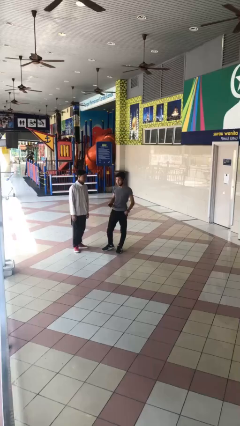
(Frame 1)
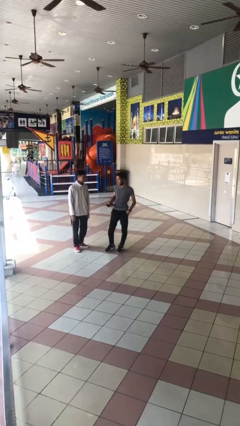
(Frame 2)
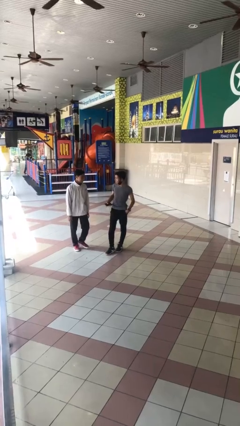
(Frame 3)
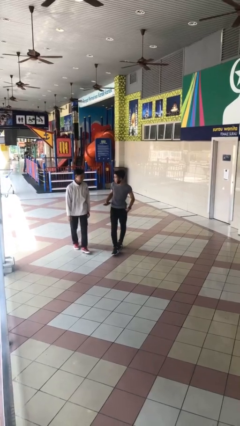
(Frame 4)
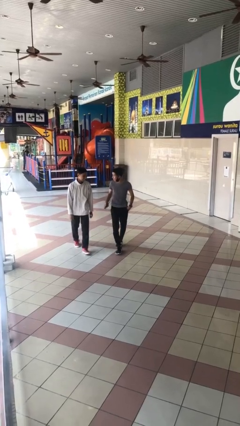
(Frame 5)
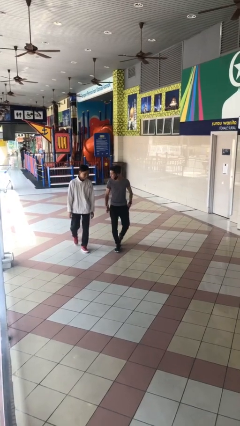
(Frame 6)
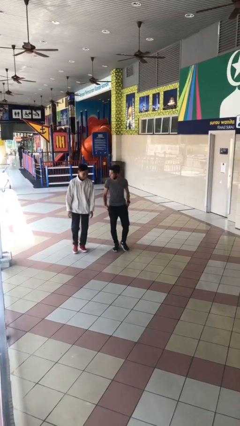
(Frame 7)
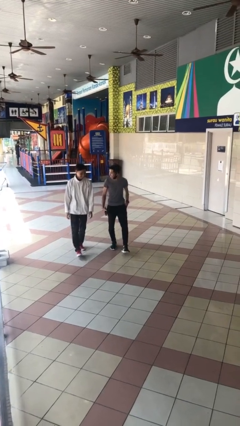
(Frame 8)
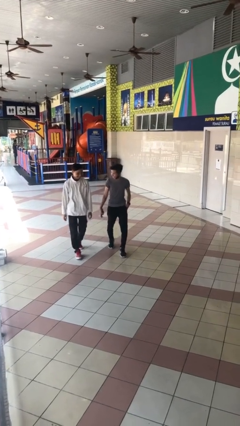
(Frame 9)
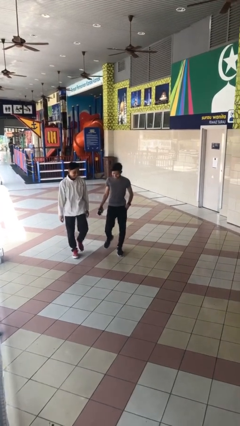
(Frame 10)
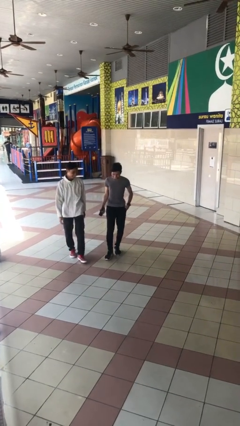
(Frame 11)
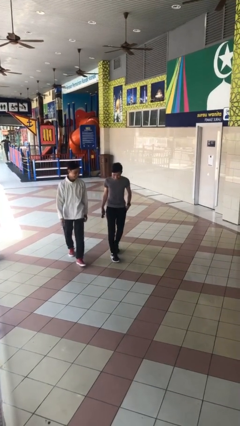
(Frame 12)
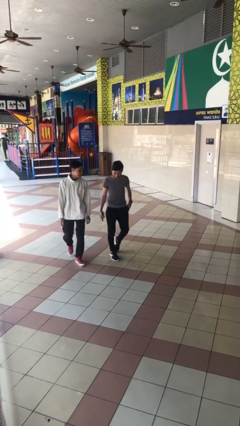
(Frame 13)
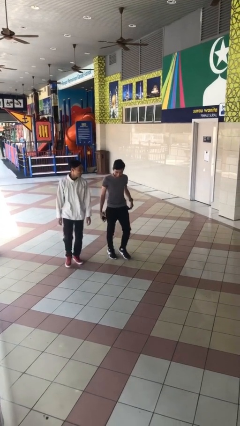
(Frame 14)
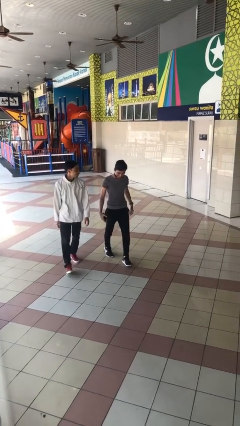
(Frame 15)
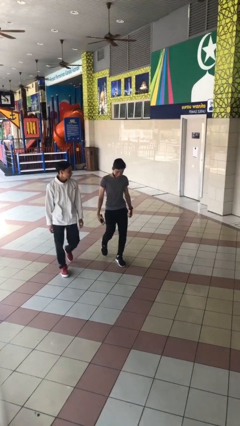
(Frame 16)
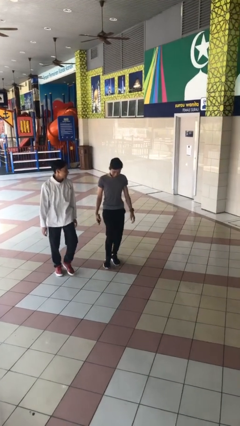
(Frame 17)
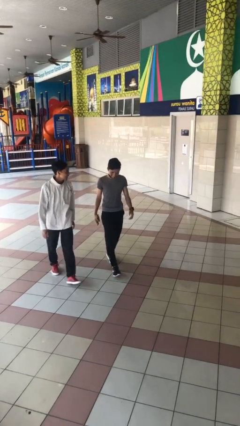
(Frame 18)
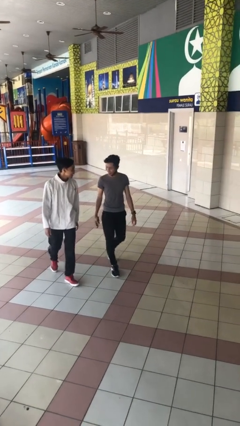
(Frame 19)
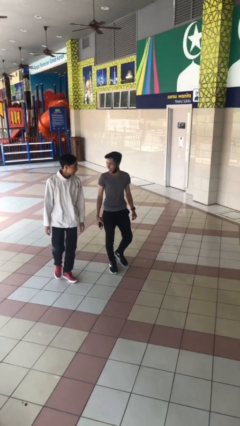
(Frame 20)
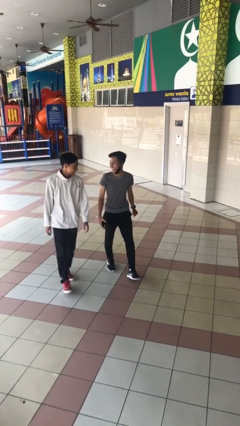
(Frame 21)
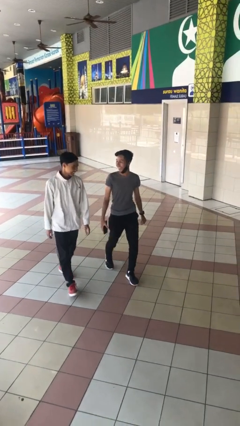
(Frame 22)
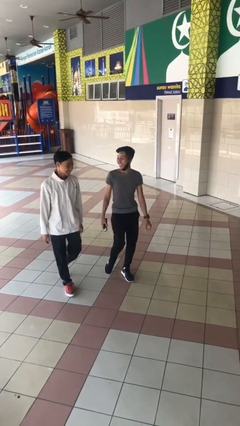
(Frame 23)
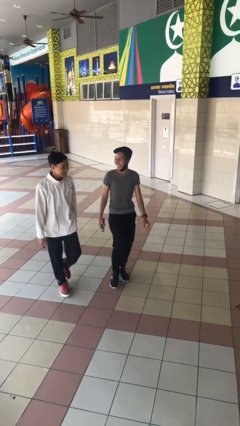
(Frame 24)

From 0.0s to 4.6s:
person talks to person

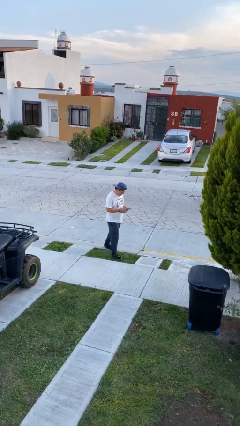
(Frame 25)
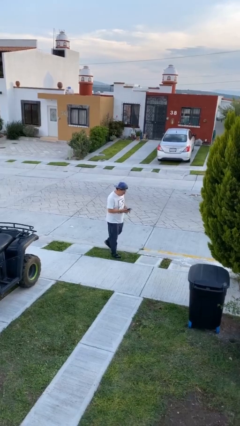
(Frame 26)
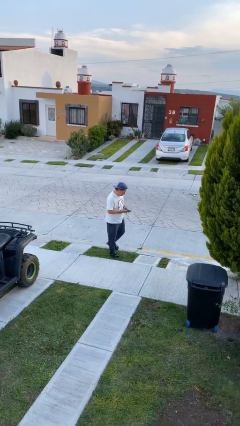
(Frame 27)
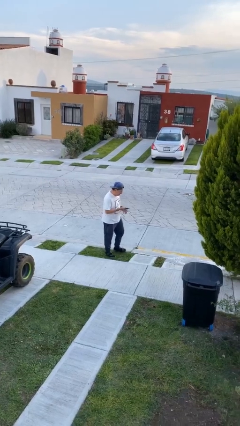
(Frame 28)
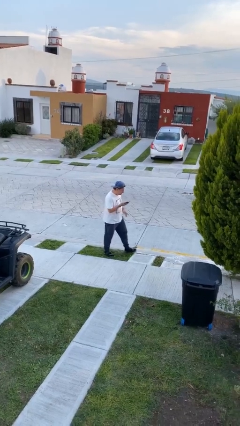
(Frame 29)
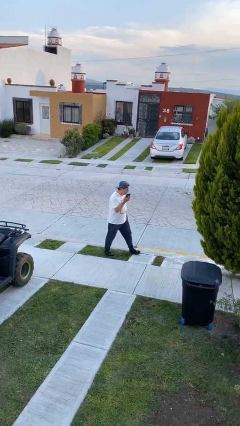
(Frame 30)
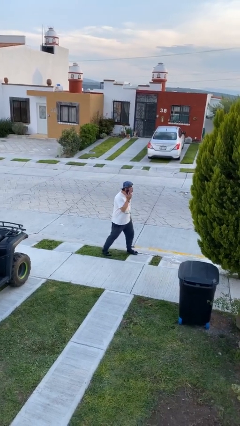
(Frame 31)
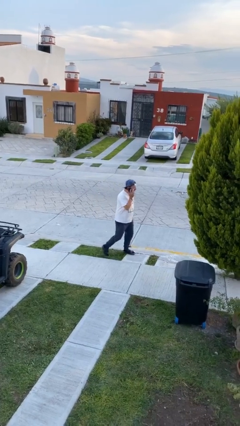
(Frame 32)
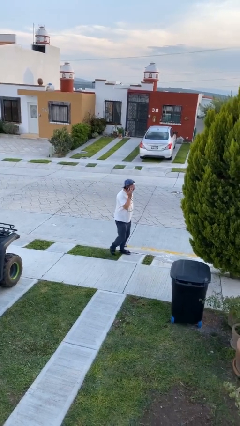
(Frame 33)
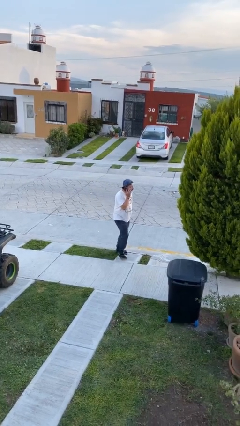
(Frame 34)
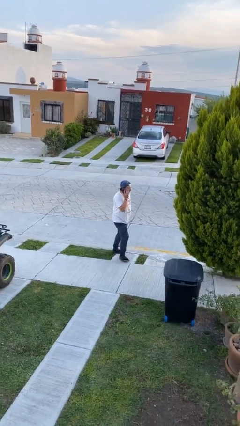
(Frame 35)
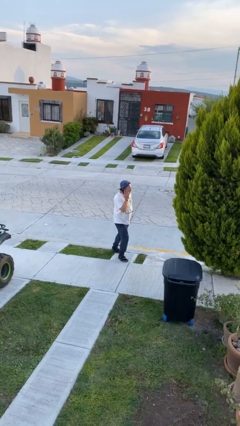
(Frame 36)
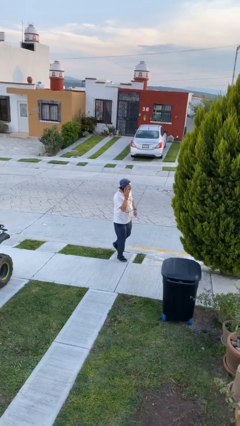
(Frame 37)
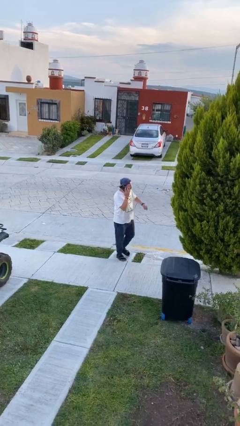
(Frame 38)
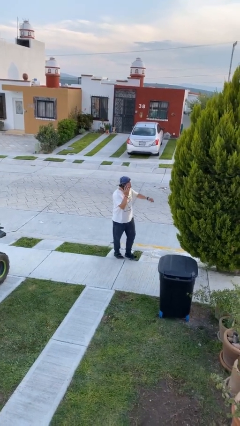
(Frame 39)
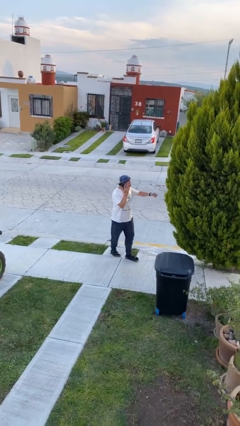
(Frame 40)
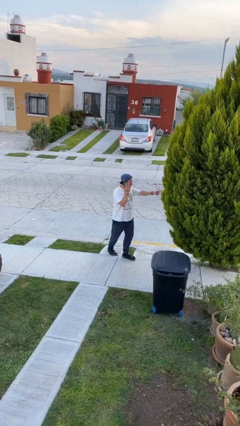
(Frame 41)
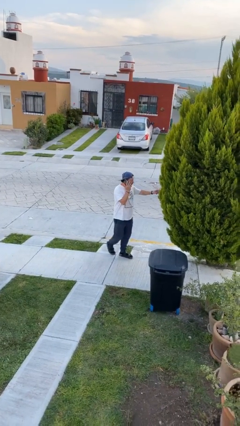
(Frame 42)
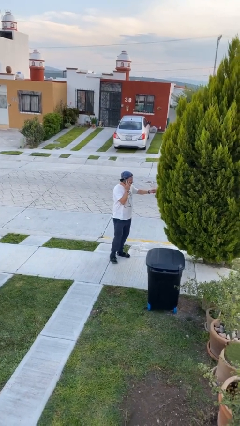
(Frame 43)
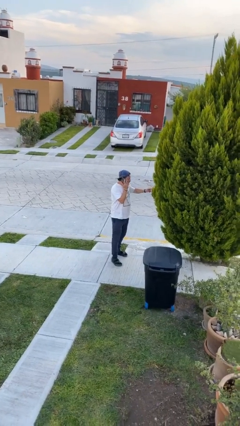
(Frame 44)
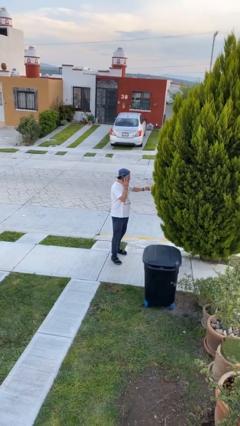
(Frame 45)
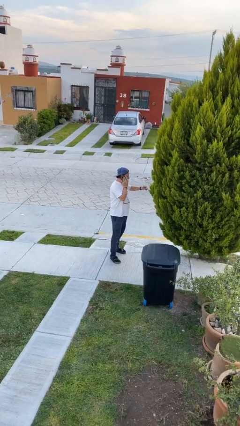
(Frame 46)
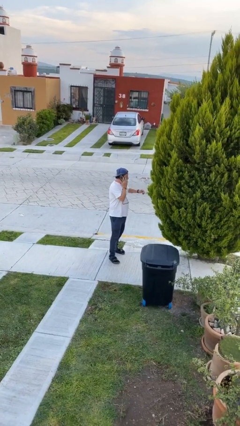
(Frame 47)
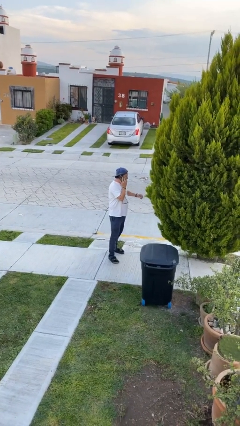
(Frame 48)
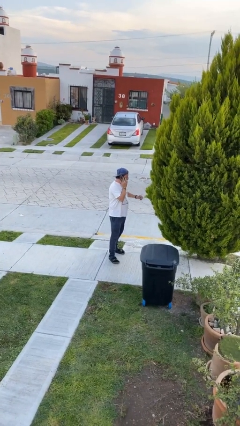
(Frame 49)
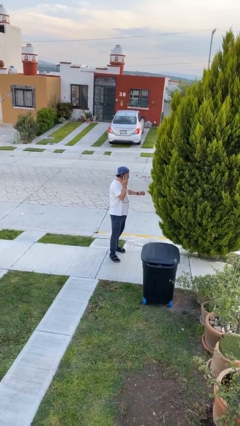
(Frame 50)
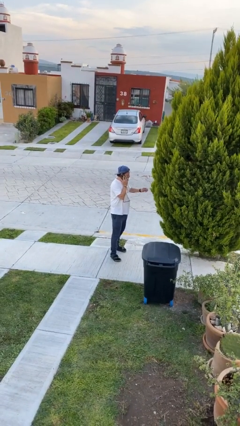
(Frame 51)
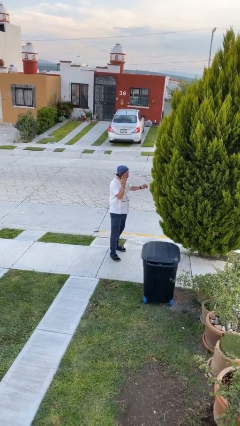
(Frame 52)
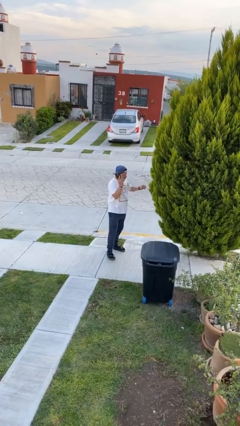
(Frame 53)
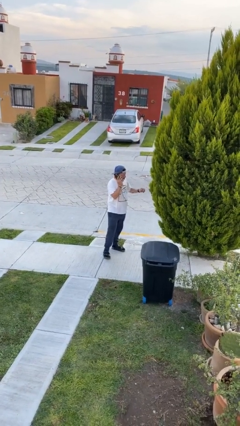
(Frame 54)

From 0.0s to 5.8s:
person talks on phone

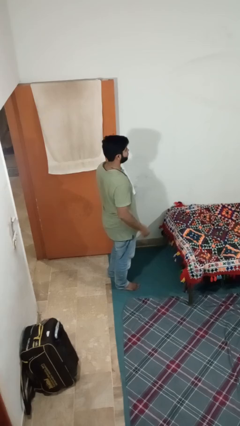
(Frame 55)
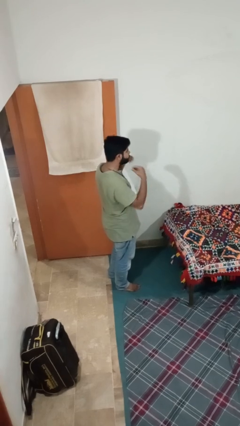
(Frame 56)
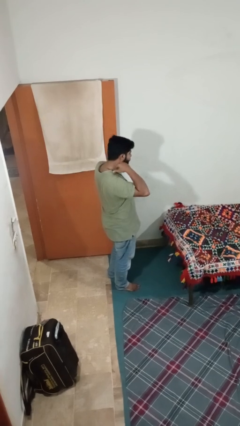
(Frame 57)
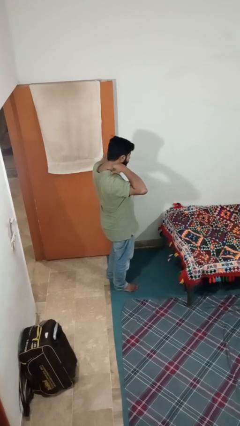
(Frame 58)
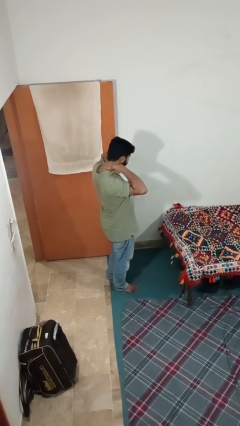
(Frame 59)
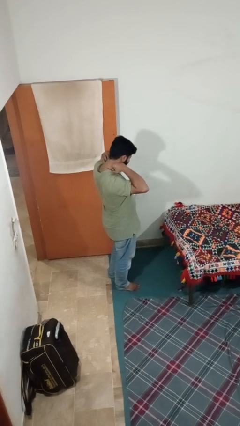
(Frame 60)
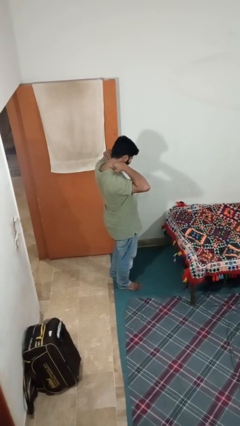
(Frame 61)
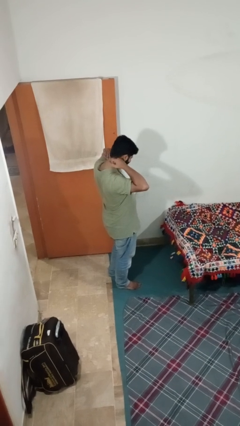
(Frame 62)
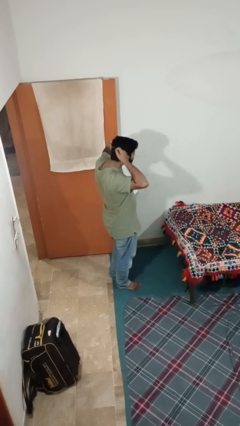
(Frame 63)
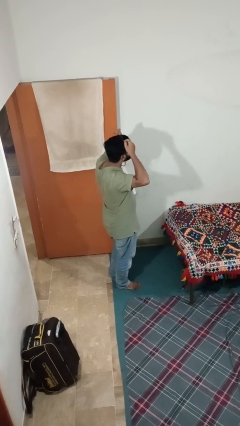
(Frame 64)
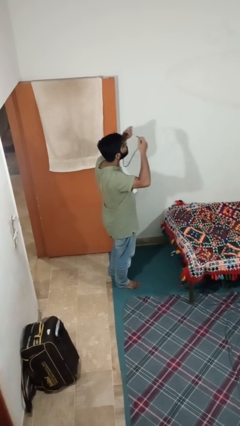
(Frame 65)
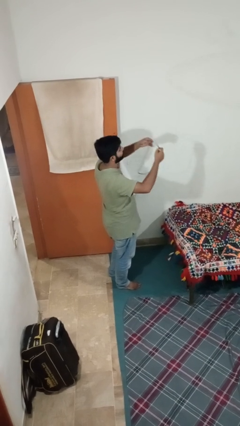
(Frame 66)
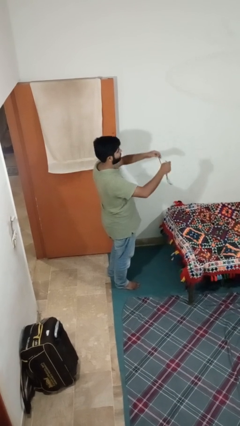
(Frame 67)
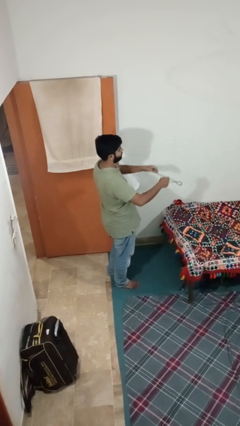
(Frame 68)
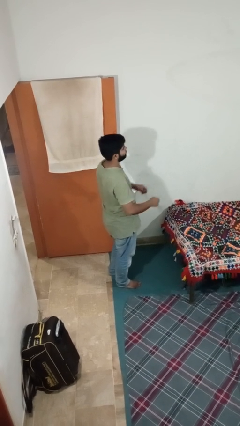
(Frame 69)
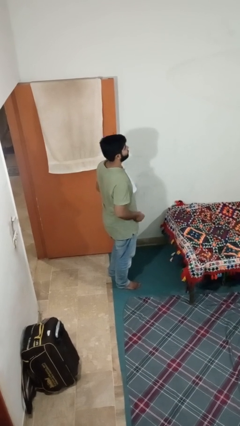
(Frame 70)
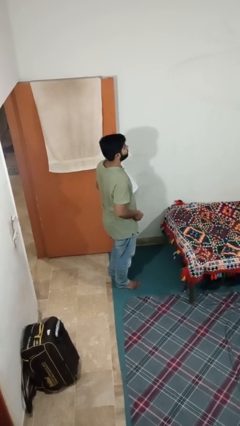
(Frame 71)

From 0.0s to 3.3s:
person takes off necklace

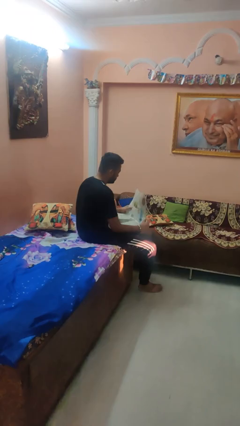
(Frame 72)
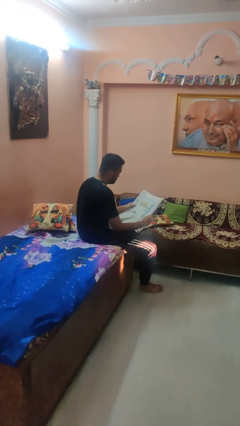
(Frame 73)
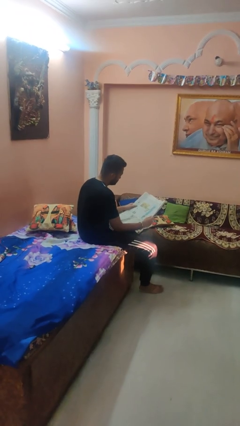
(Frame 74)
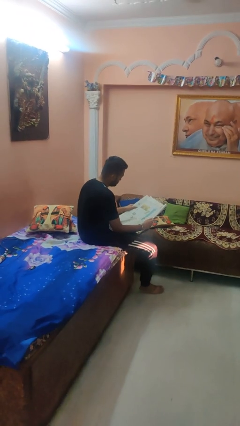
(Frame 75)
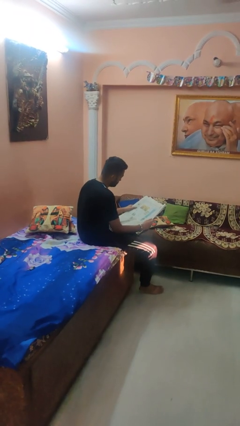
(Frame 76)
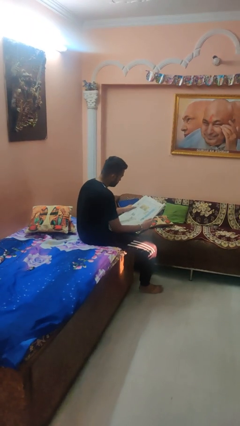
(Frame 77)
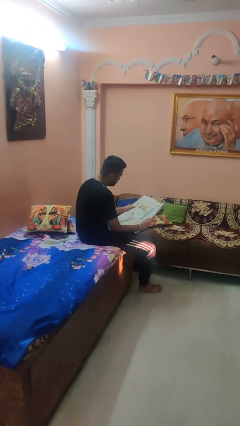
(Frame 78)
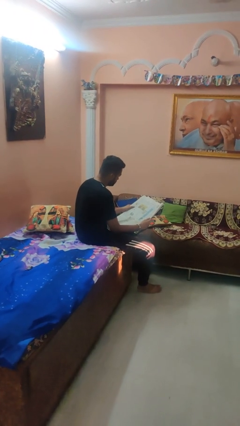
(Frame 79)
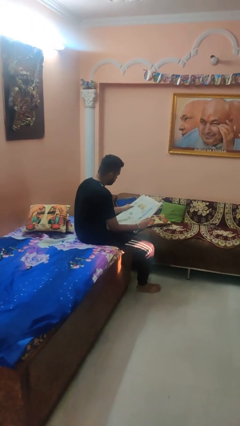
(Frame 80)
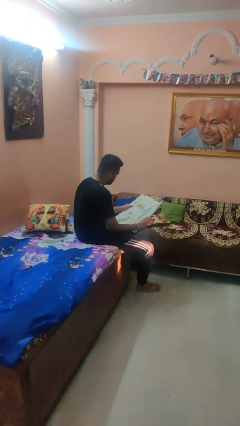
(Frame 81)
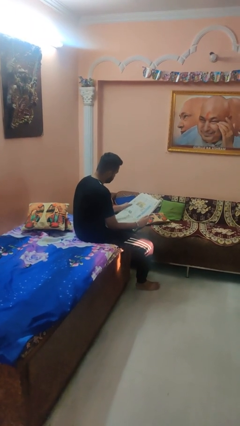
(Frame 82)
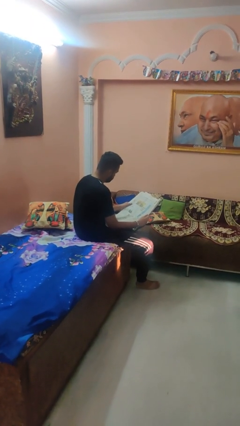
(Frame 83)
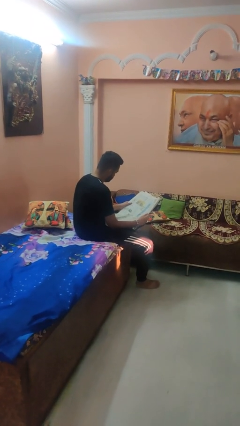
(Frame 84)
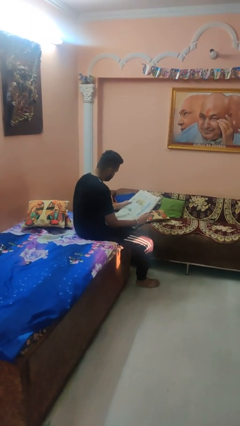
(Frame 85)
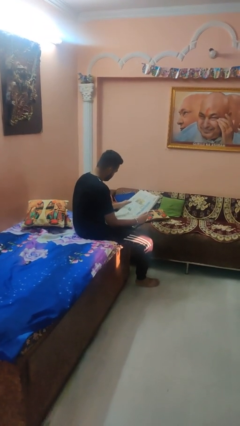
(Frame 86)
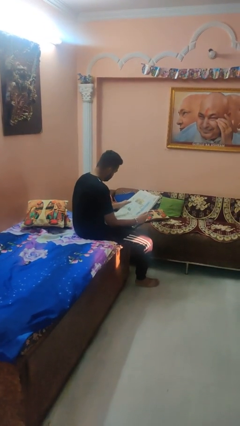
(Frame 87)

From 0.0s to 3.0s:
person reads newspaper

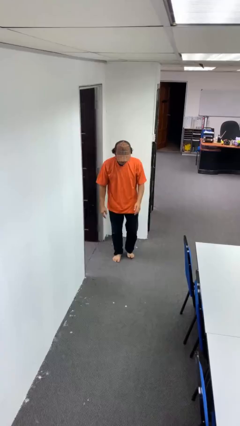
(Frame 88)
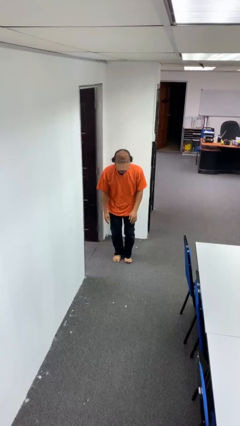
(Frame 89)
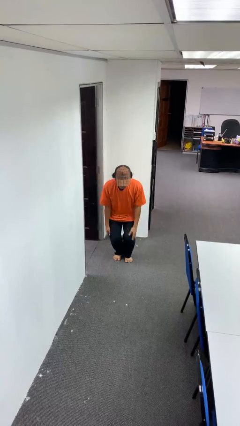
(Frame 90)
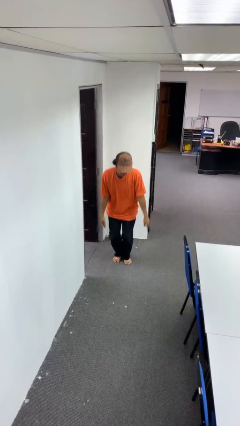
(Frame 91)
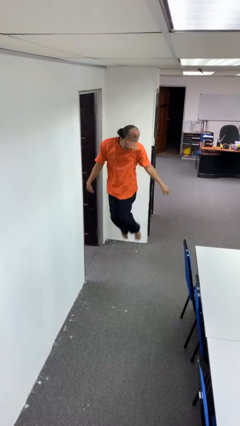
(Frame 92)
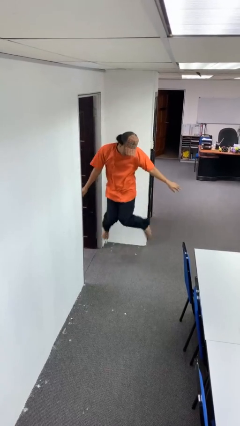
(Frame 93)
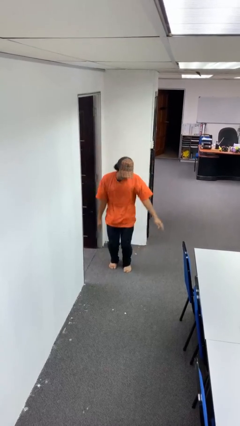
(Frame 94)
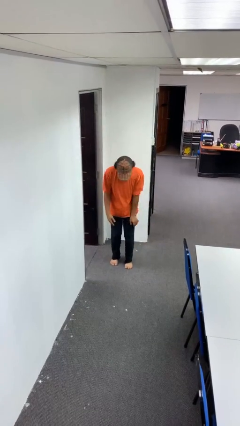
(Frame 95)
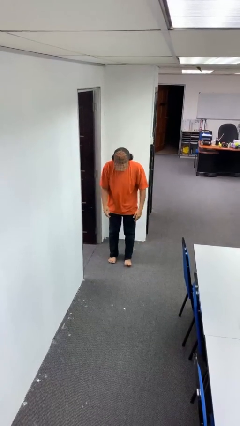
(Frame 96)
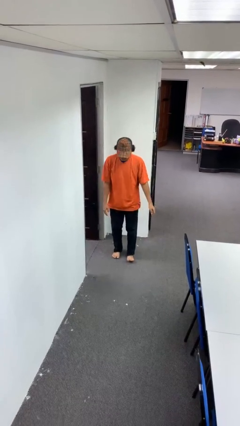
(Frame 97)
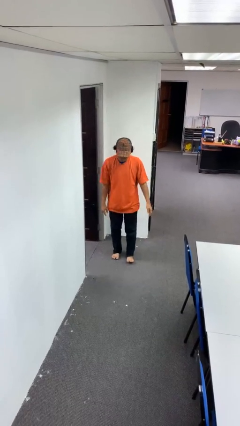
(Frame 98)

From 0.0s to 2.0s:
person jumps
